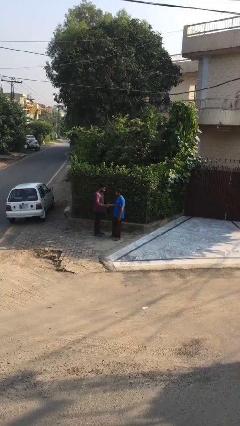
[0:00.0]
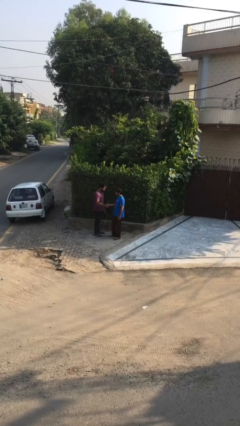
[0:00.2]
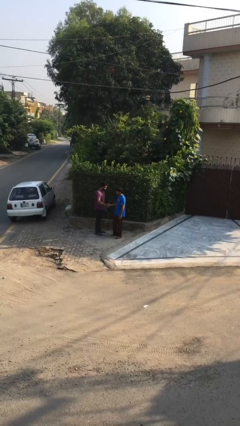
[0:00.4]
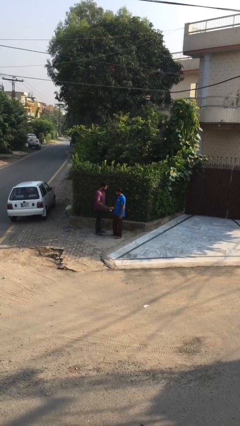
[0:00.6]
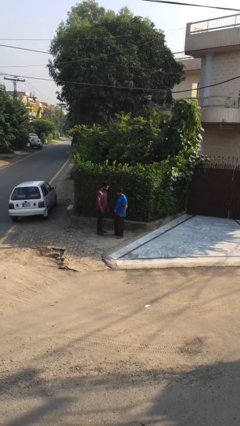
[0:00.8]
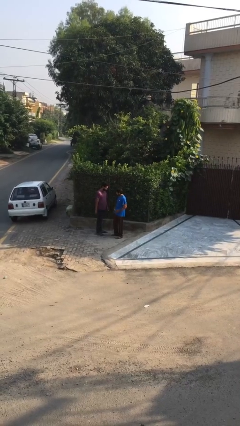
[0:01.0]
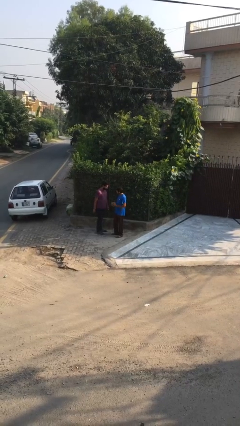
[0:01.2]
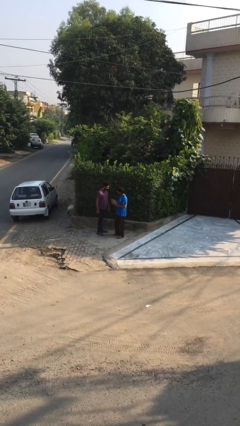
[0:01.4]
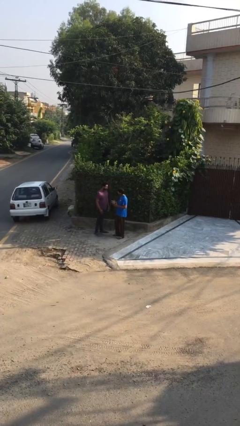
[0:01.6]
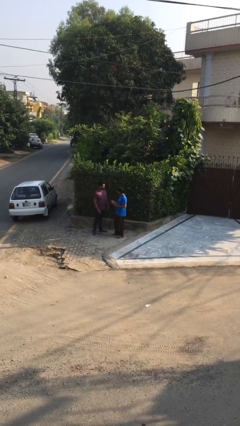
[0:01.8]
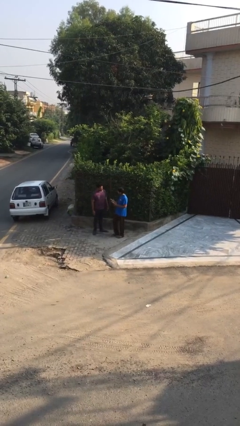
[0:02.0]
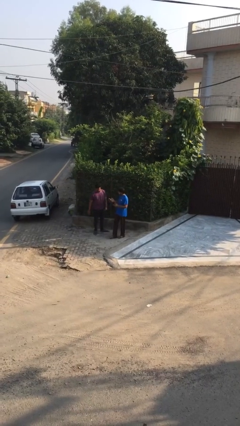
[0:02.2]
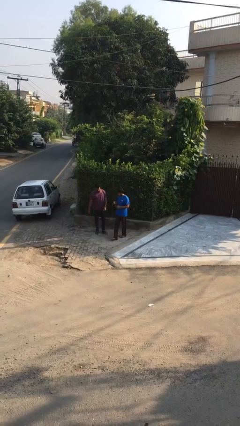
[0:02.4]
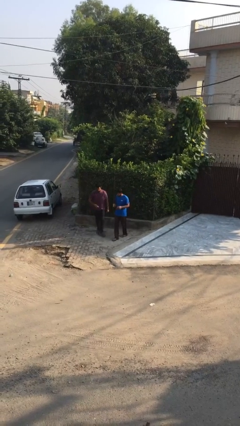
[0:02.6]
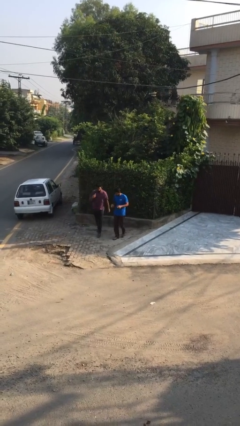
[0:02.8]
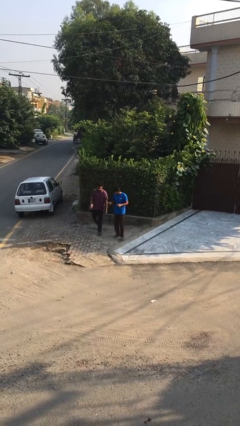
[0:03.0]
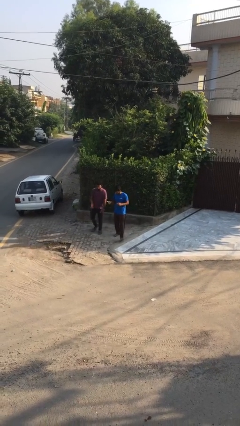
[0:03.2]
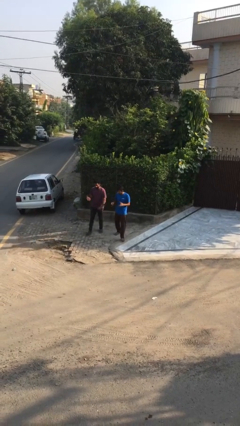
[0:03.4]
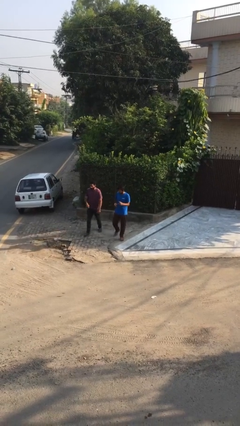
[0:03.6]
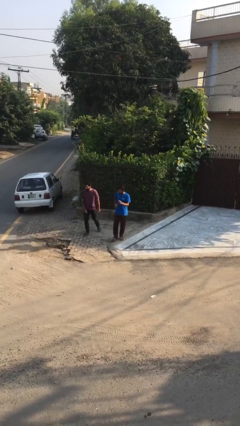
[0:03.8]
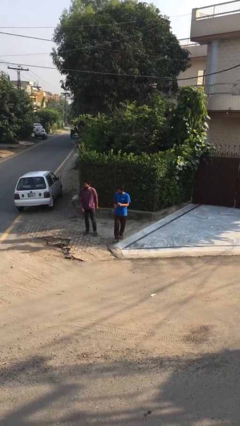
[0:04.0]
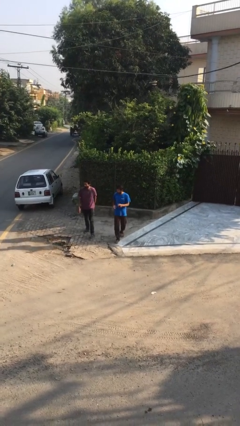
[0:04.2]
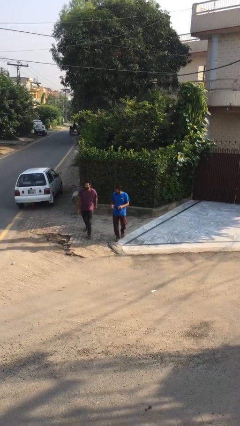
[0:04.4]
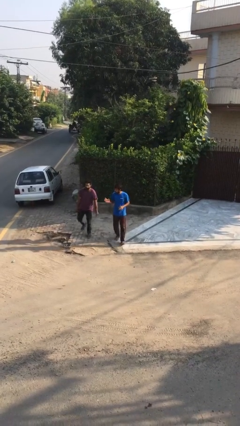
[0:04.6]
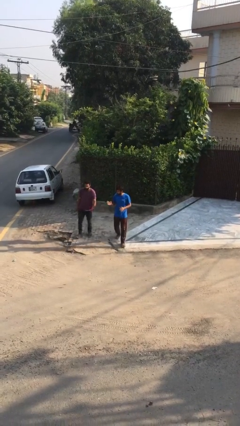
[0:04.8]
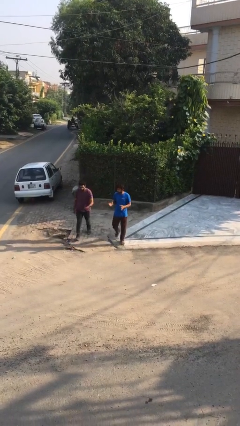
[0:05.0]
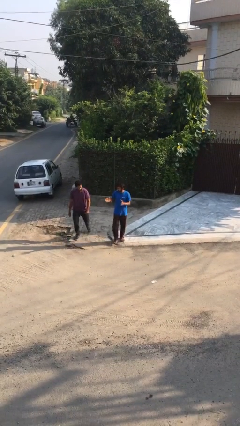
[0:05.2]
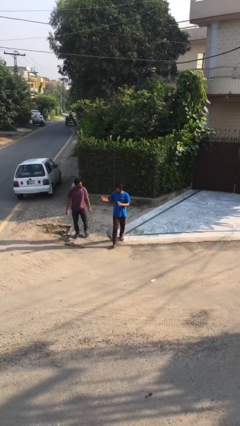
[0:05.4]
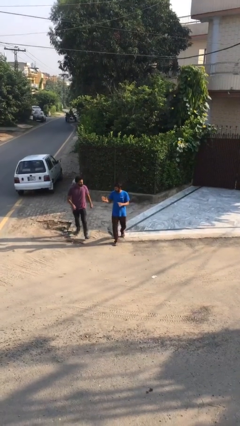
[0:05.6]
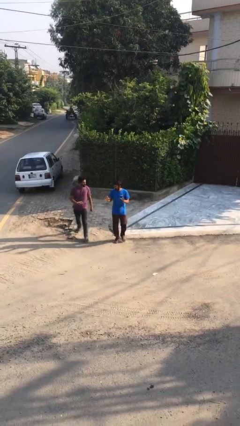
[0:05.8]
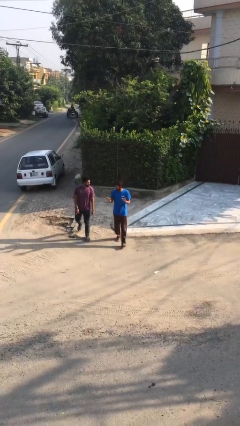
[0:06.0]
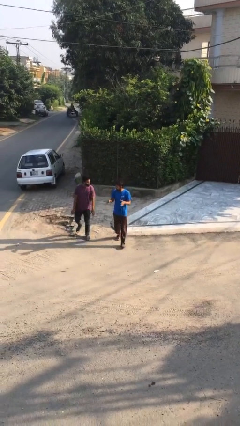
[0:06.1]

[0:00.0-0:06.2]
person talks to person

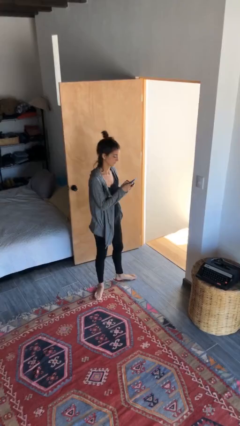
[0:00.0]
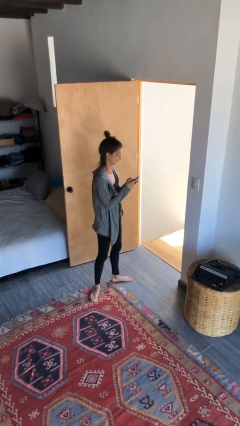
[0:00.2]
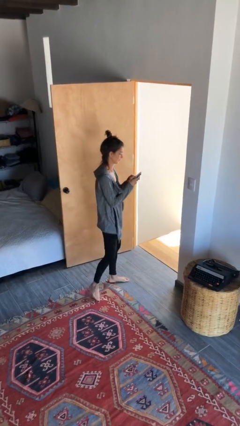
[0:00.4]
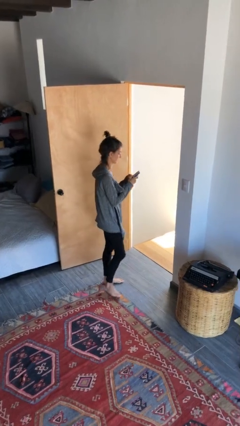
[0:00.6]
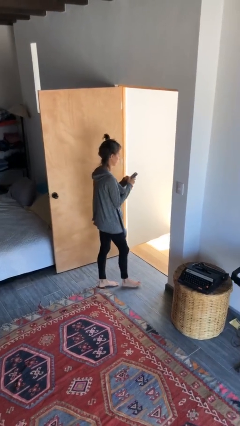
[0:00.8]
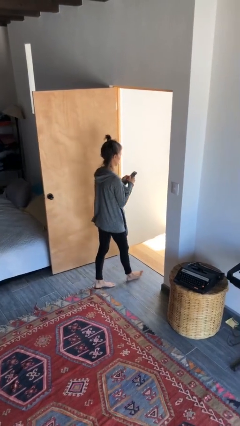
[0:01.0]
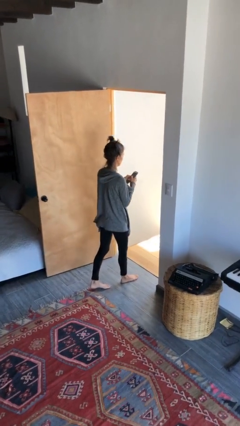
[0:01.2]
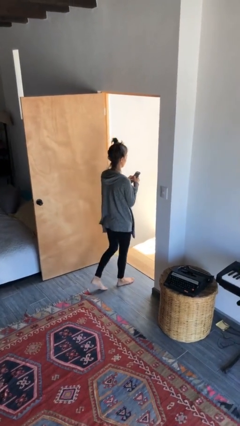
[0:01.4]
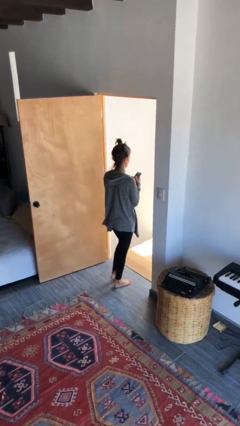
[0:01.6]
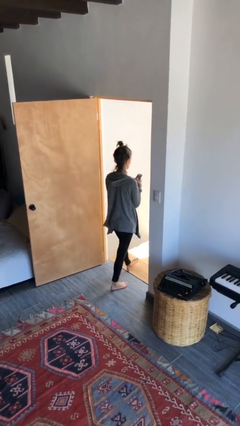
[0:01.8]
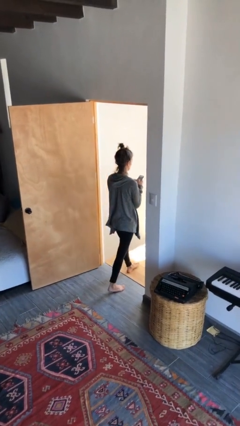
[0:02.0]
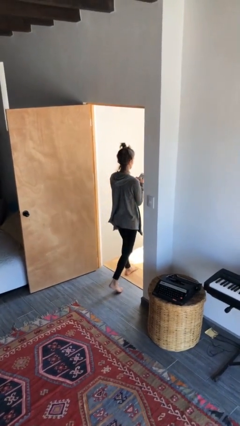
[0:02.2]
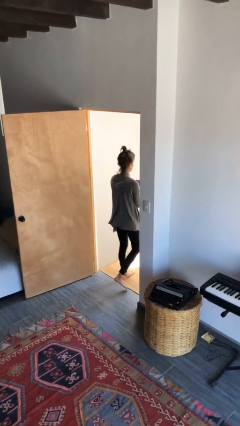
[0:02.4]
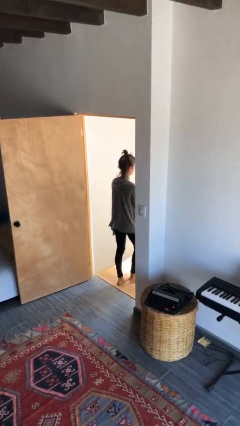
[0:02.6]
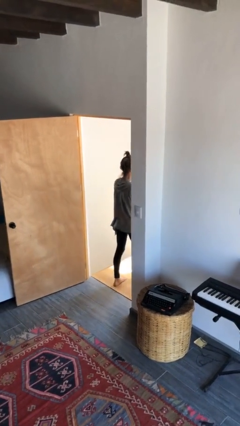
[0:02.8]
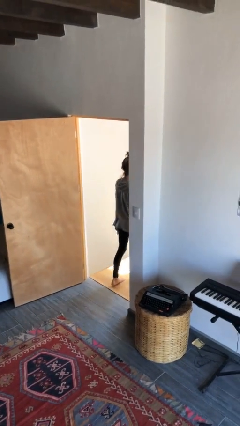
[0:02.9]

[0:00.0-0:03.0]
person exits scene through structure

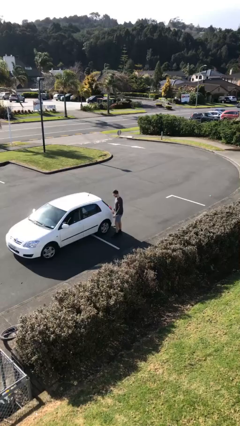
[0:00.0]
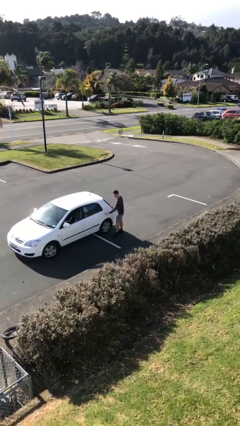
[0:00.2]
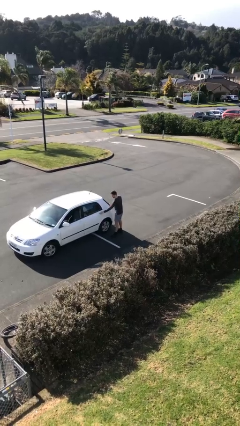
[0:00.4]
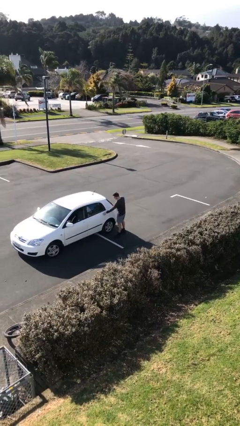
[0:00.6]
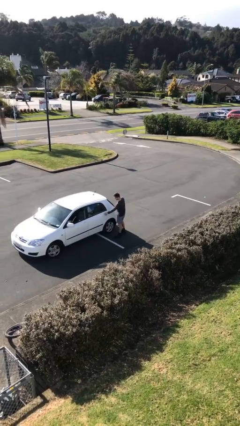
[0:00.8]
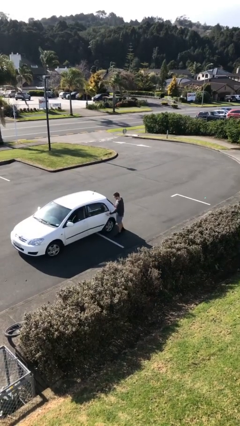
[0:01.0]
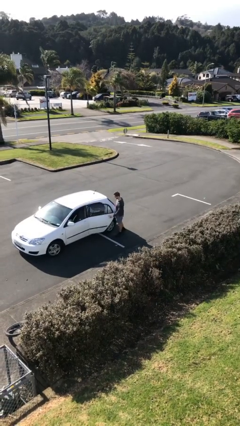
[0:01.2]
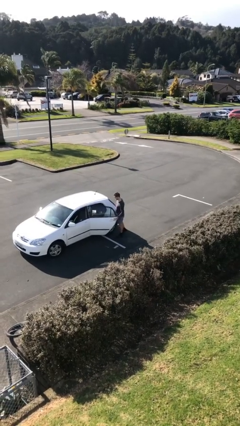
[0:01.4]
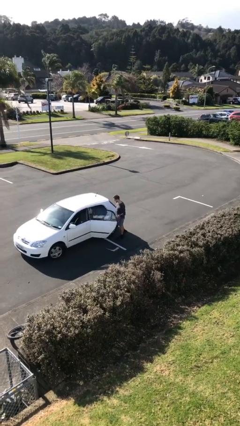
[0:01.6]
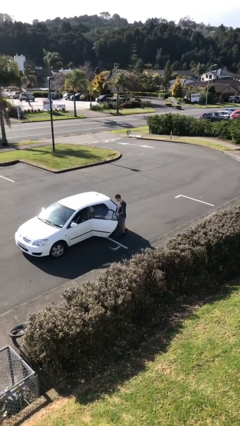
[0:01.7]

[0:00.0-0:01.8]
person opens car door

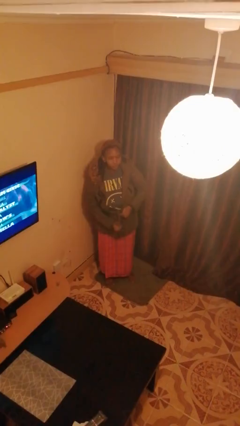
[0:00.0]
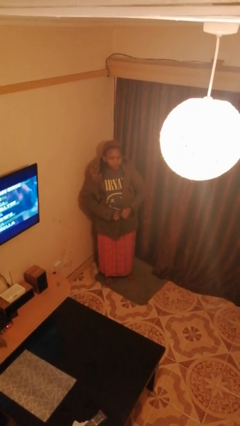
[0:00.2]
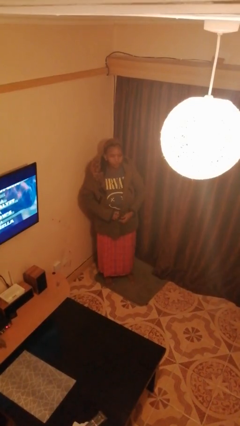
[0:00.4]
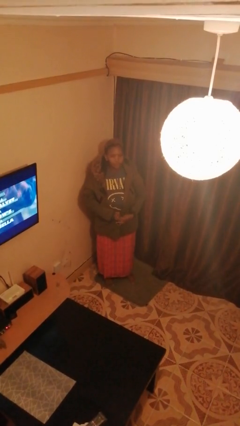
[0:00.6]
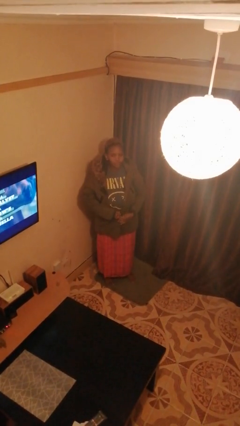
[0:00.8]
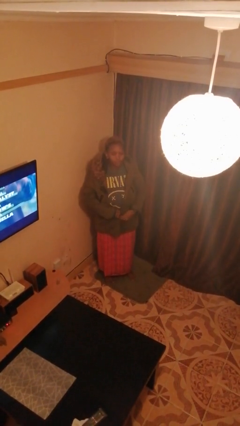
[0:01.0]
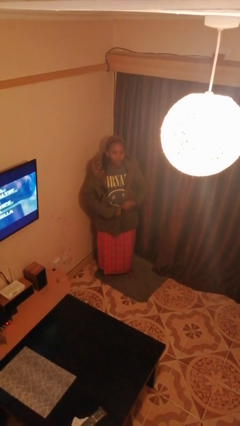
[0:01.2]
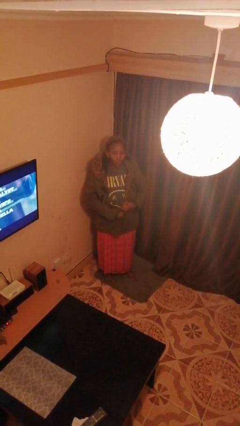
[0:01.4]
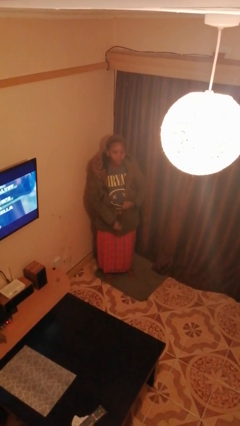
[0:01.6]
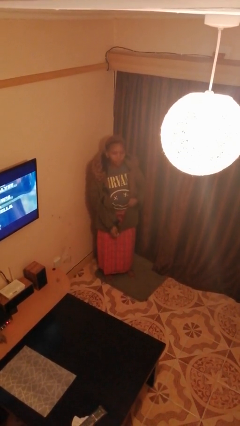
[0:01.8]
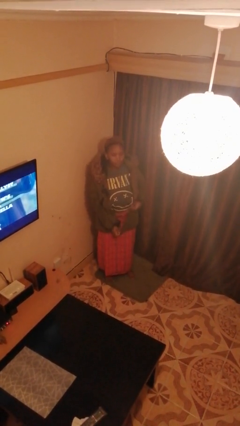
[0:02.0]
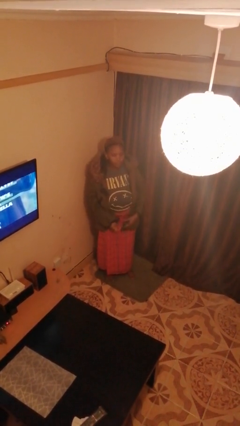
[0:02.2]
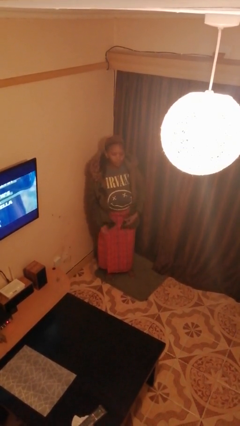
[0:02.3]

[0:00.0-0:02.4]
person unzips jacket

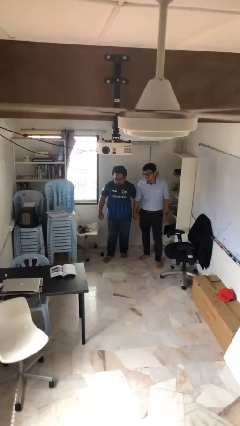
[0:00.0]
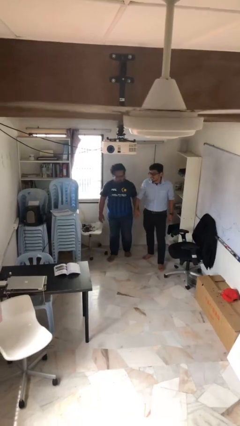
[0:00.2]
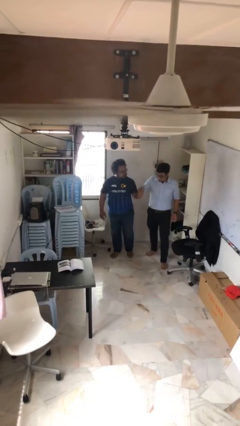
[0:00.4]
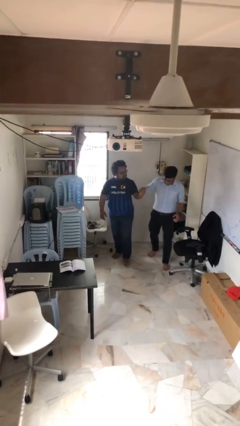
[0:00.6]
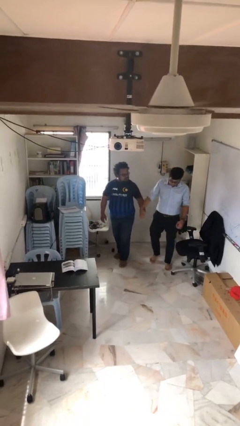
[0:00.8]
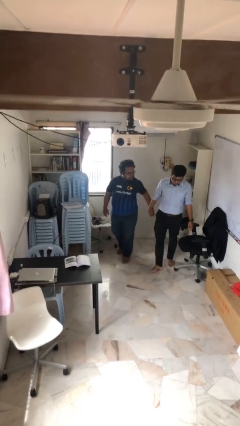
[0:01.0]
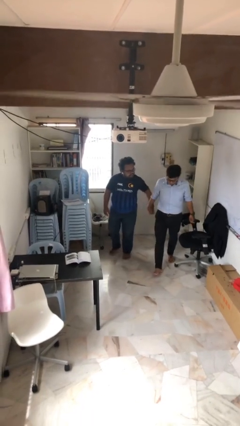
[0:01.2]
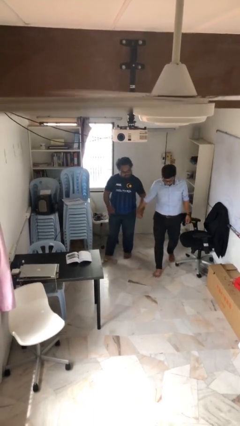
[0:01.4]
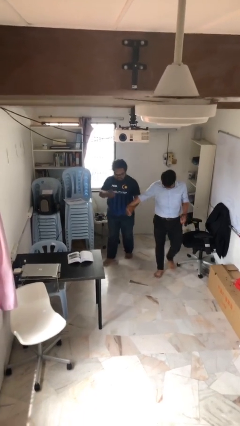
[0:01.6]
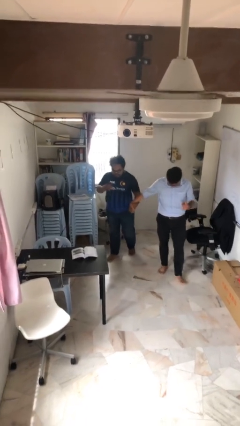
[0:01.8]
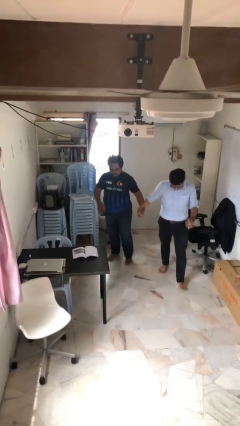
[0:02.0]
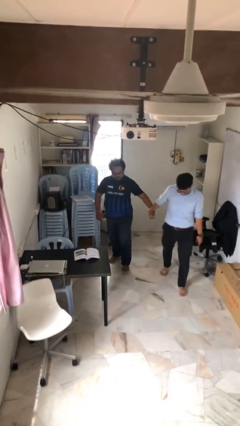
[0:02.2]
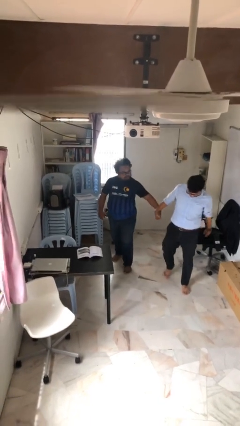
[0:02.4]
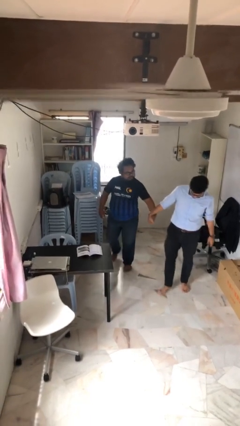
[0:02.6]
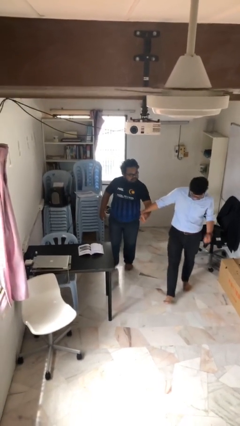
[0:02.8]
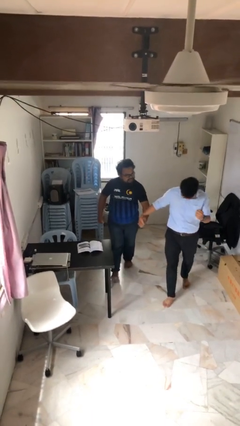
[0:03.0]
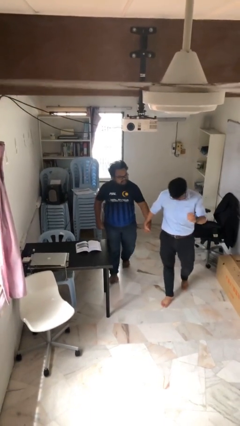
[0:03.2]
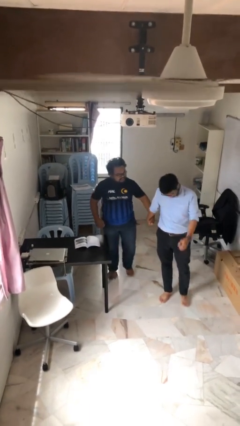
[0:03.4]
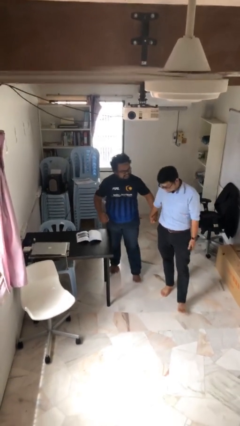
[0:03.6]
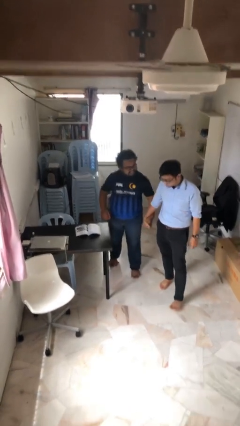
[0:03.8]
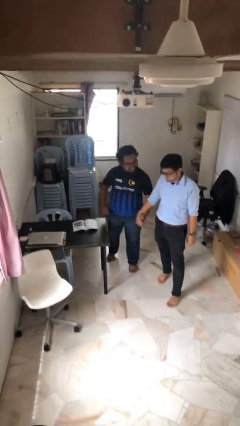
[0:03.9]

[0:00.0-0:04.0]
person holds hand

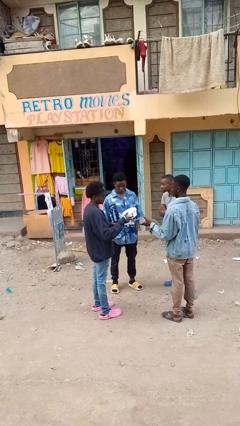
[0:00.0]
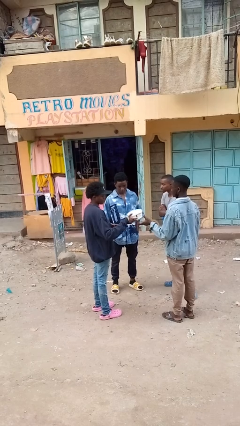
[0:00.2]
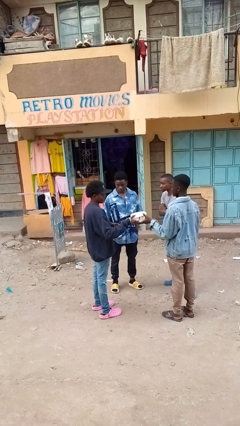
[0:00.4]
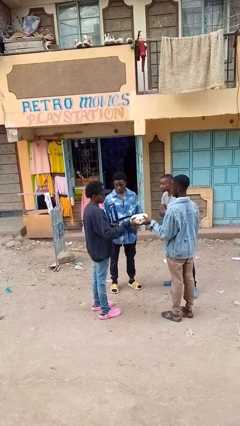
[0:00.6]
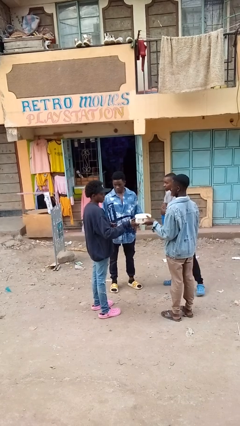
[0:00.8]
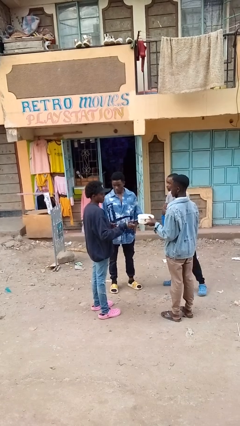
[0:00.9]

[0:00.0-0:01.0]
person transfers object to person
